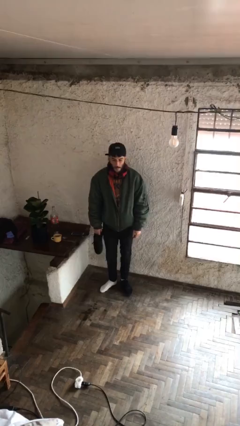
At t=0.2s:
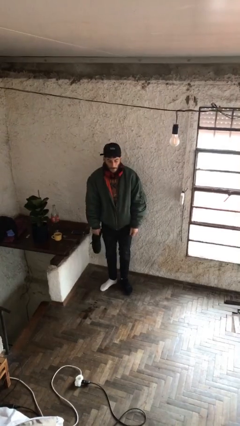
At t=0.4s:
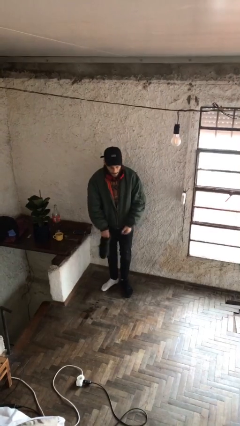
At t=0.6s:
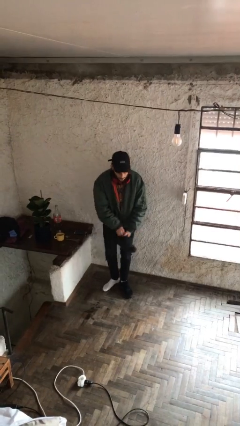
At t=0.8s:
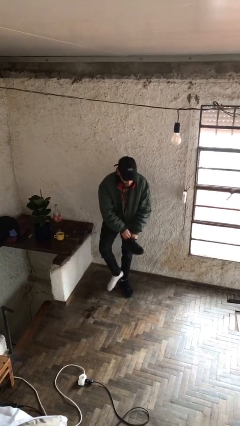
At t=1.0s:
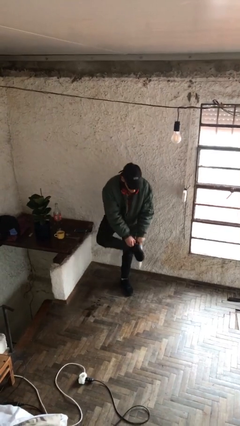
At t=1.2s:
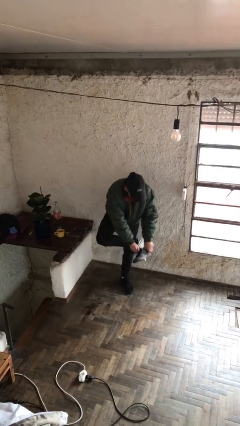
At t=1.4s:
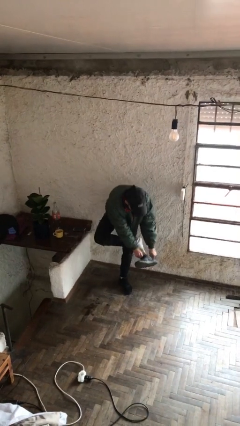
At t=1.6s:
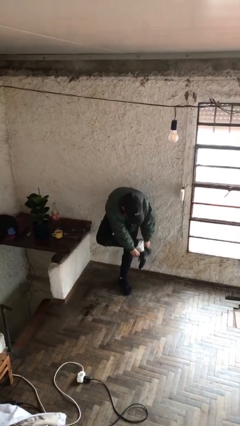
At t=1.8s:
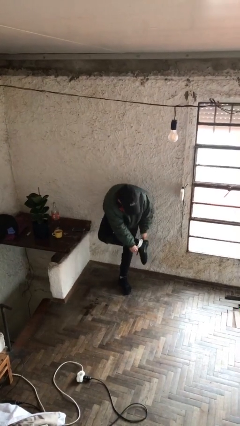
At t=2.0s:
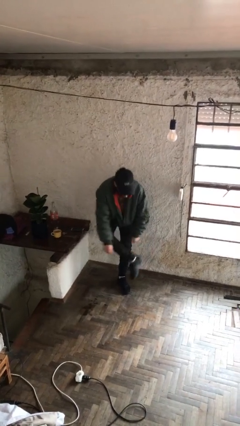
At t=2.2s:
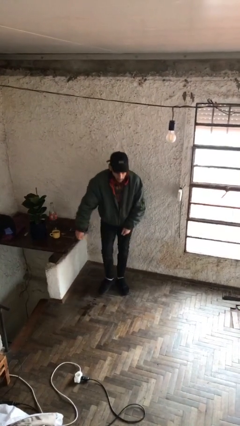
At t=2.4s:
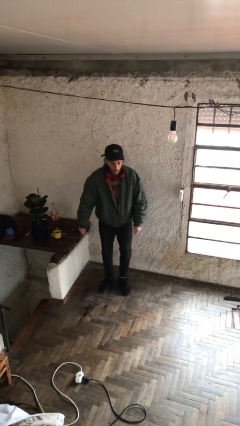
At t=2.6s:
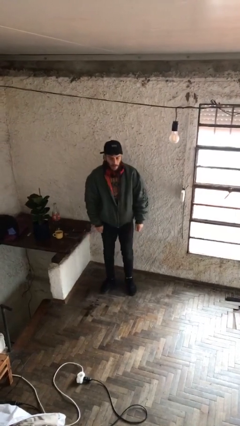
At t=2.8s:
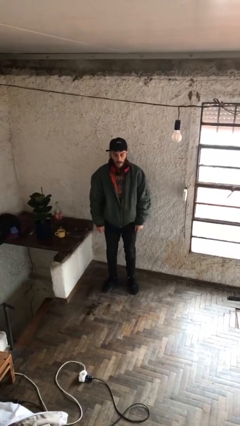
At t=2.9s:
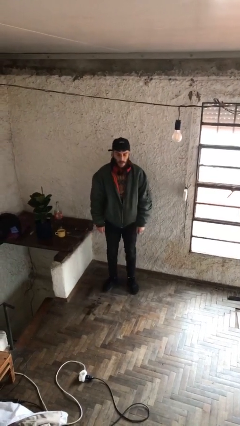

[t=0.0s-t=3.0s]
person puts on shoes

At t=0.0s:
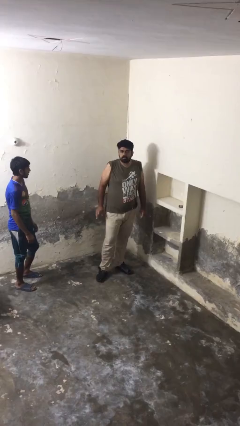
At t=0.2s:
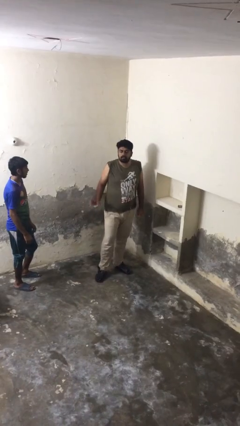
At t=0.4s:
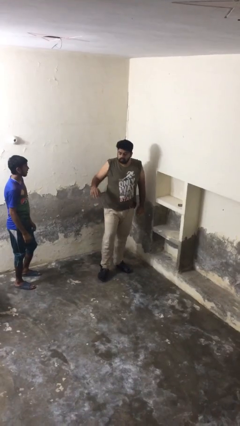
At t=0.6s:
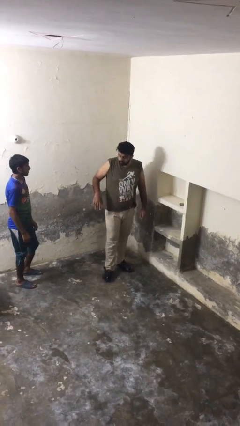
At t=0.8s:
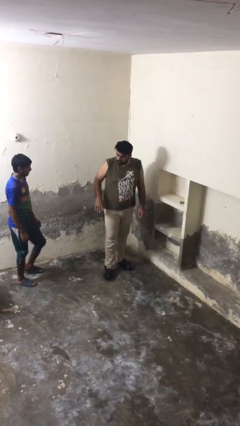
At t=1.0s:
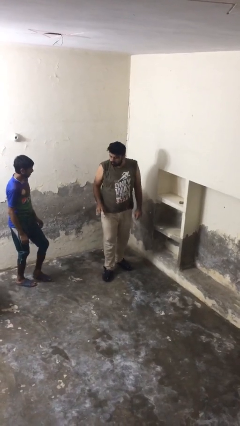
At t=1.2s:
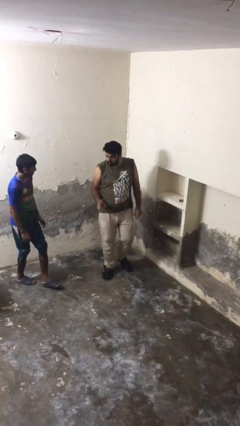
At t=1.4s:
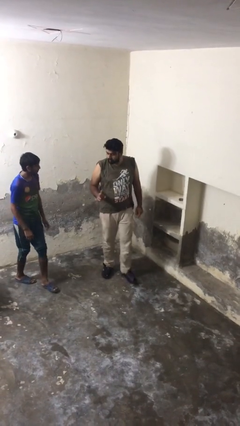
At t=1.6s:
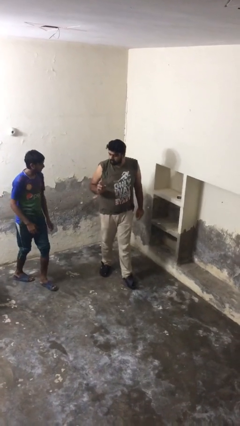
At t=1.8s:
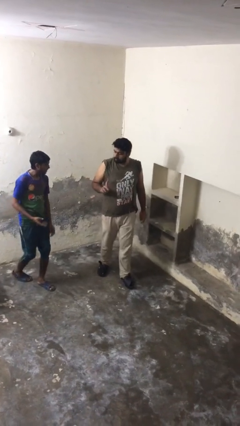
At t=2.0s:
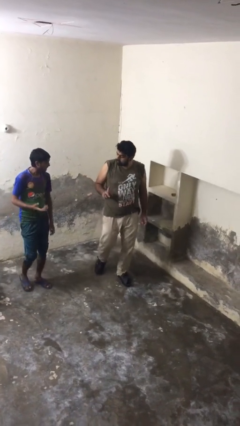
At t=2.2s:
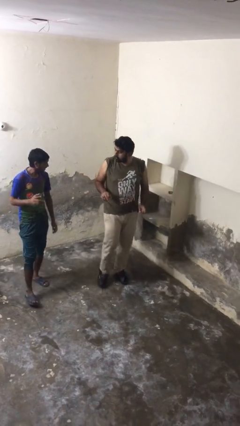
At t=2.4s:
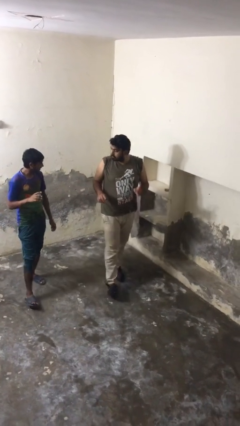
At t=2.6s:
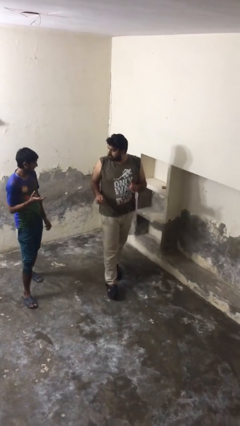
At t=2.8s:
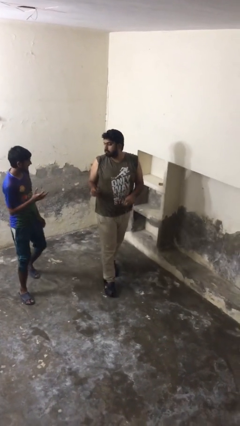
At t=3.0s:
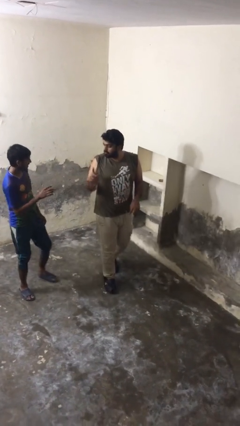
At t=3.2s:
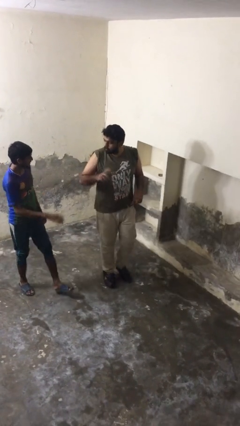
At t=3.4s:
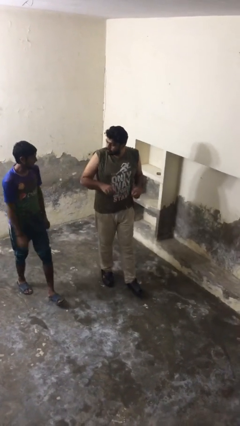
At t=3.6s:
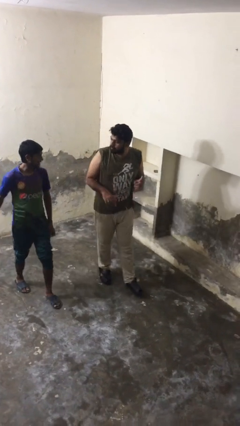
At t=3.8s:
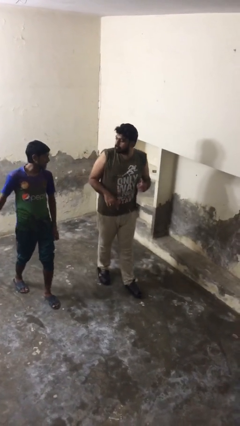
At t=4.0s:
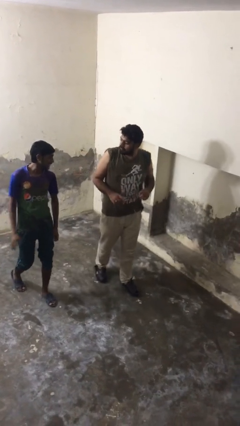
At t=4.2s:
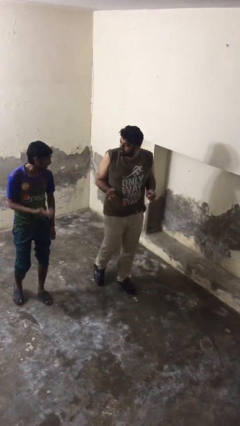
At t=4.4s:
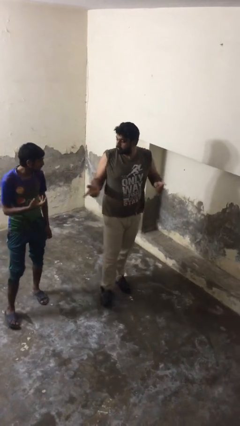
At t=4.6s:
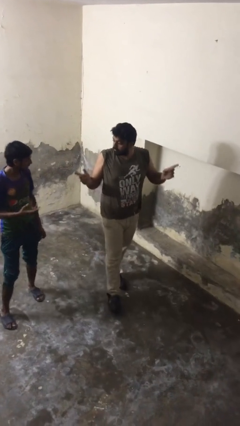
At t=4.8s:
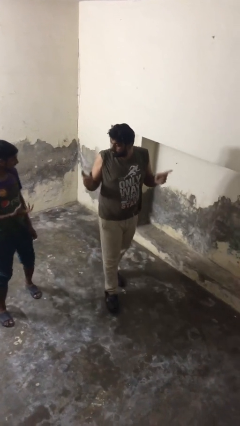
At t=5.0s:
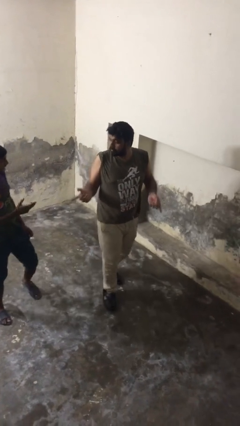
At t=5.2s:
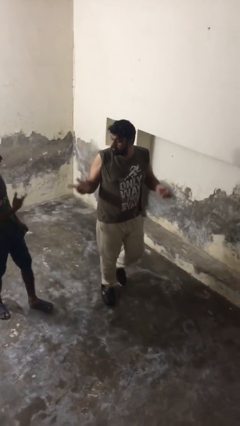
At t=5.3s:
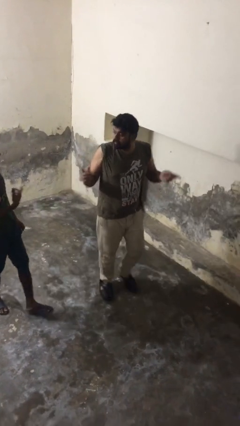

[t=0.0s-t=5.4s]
person talks to person

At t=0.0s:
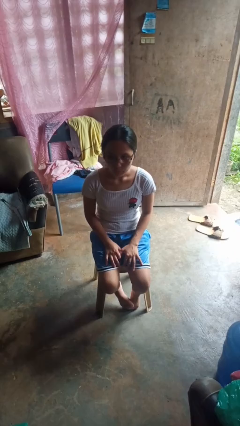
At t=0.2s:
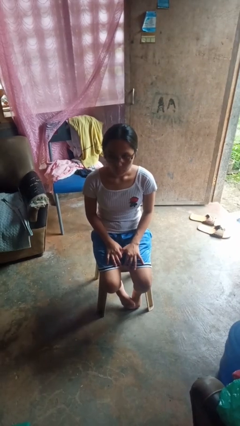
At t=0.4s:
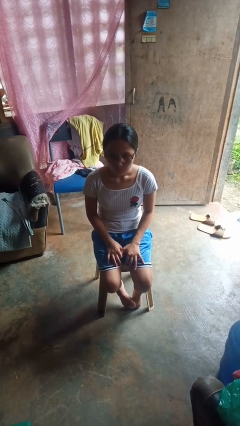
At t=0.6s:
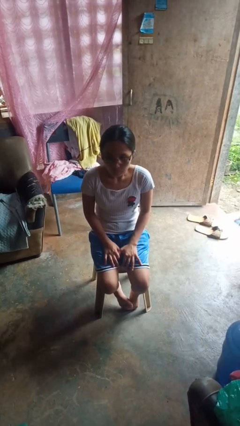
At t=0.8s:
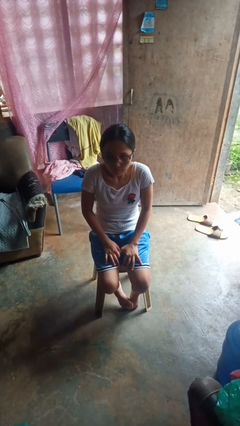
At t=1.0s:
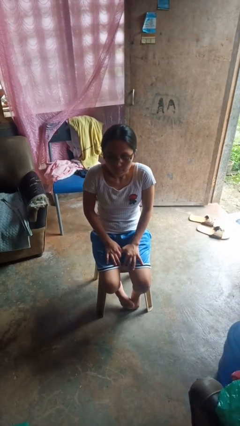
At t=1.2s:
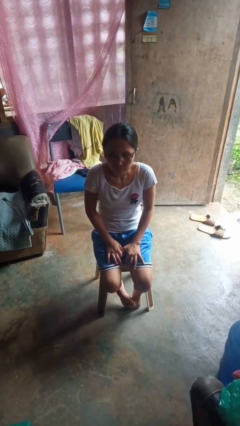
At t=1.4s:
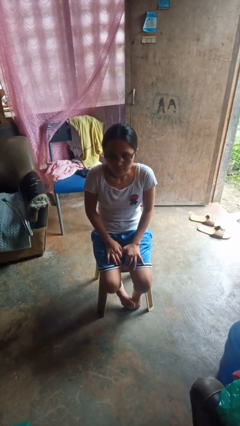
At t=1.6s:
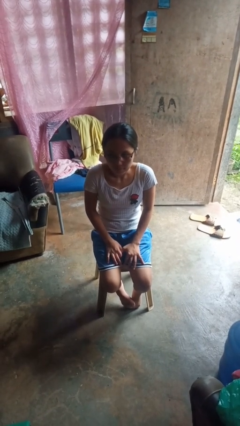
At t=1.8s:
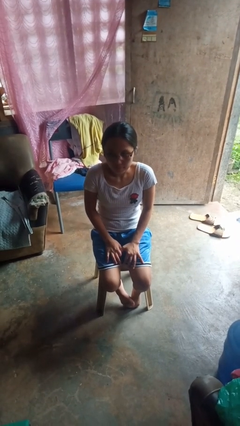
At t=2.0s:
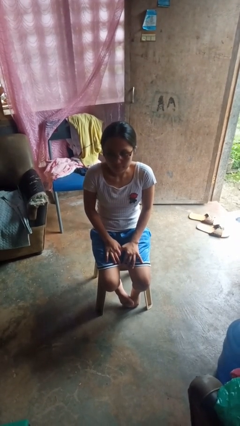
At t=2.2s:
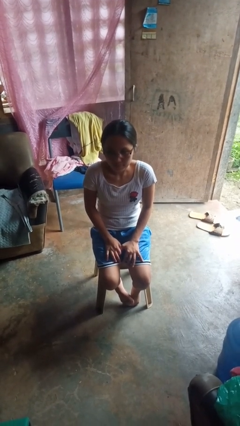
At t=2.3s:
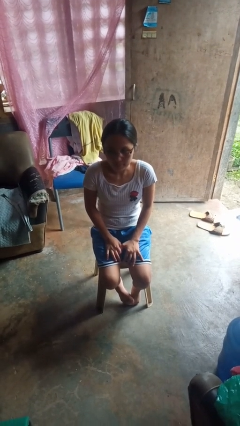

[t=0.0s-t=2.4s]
person shrugs

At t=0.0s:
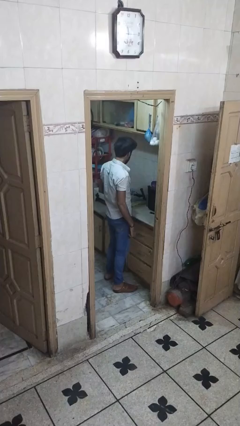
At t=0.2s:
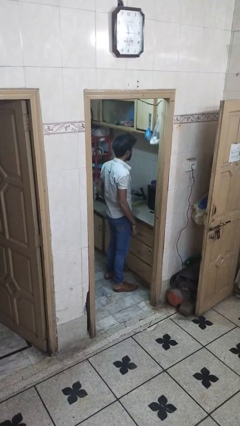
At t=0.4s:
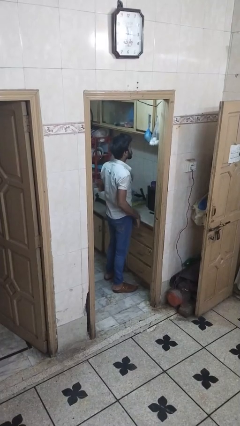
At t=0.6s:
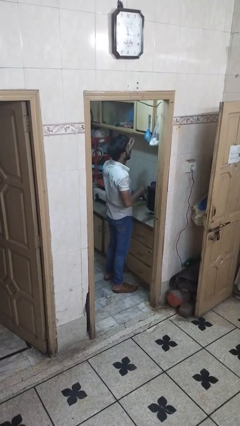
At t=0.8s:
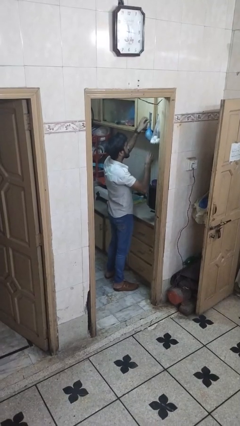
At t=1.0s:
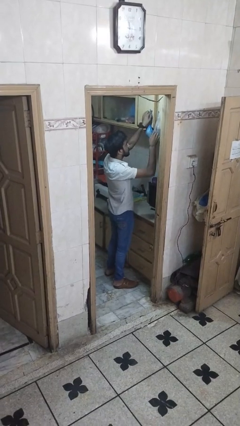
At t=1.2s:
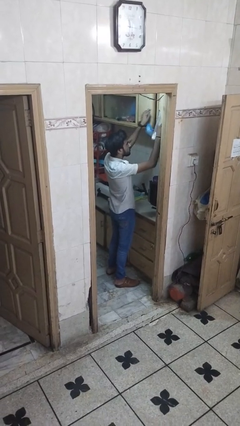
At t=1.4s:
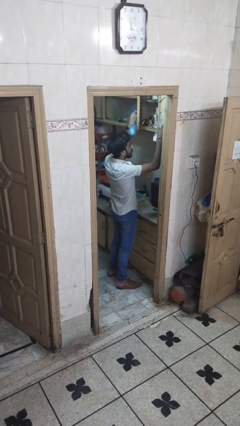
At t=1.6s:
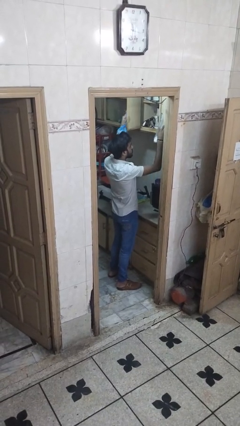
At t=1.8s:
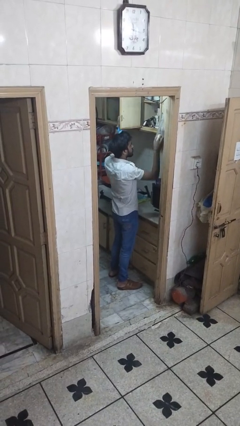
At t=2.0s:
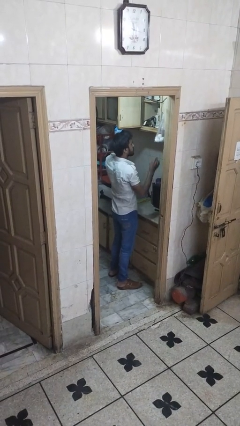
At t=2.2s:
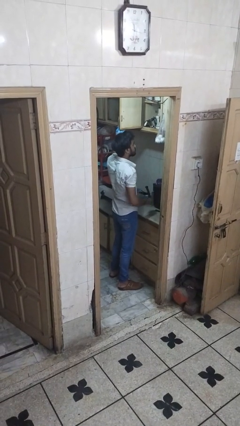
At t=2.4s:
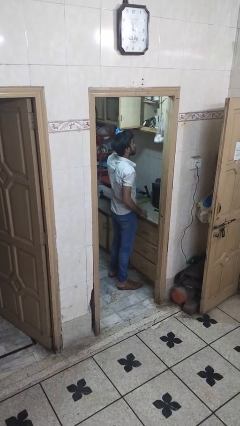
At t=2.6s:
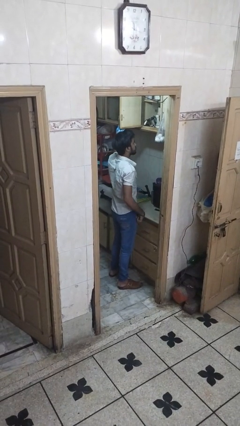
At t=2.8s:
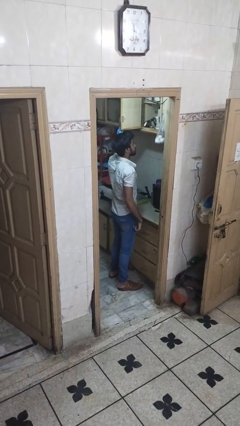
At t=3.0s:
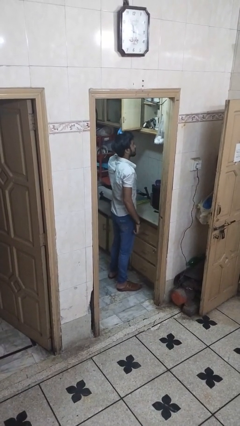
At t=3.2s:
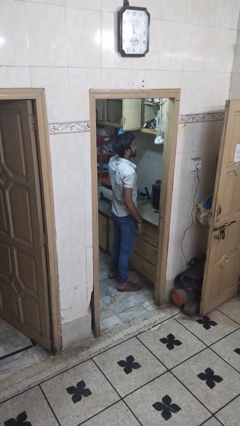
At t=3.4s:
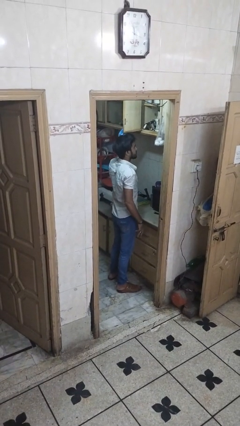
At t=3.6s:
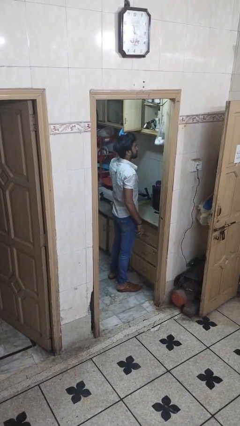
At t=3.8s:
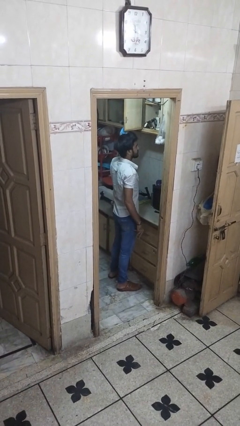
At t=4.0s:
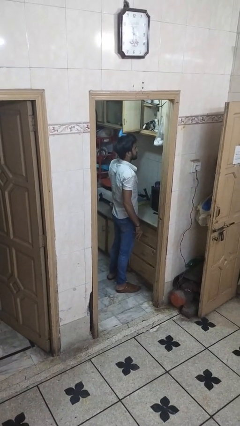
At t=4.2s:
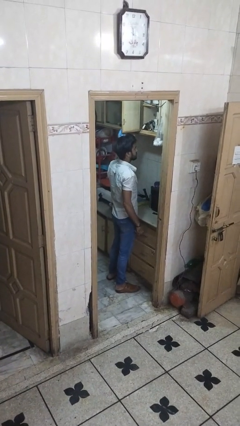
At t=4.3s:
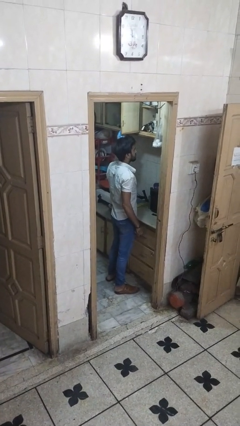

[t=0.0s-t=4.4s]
person opens cabinet

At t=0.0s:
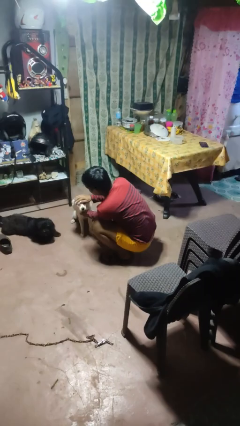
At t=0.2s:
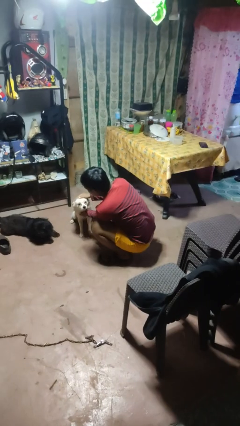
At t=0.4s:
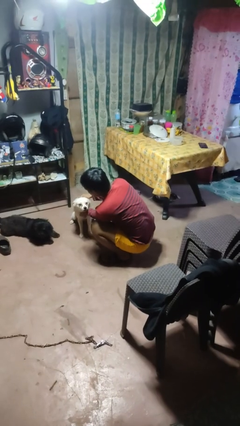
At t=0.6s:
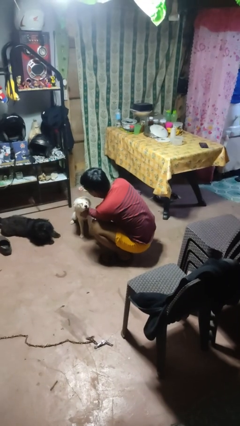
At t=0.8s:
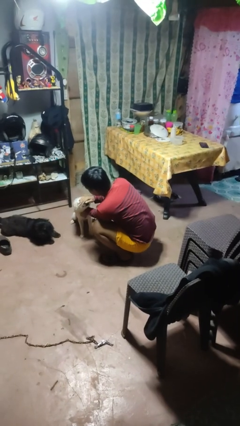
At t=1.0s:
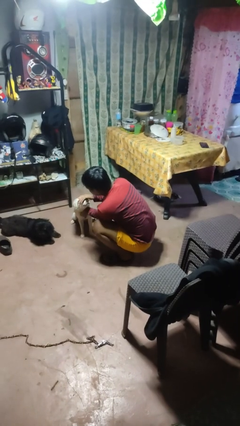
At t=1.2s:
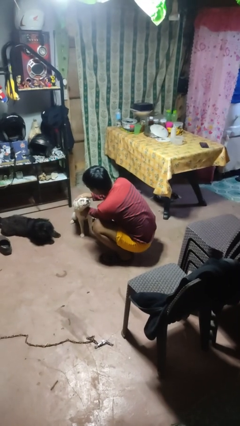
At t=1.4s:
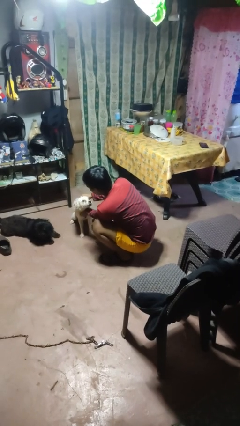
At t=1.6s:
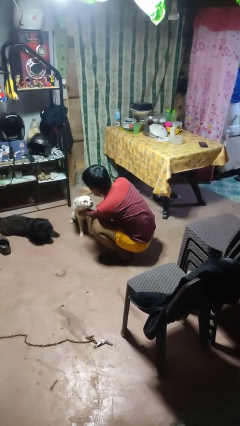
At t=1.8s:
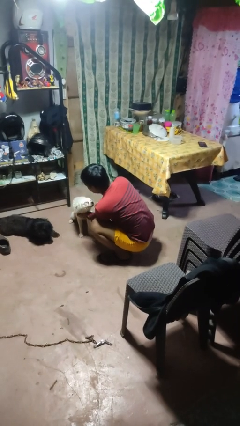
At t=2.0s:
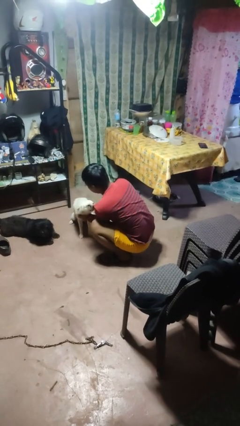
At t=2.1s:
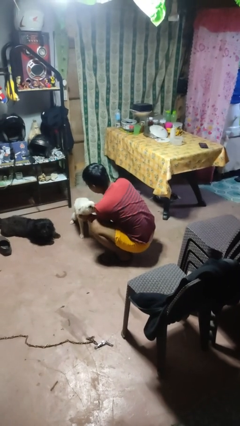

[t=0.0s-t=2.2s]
person pets dog
